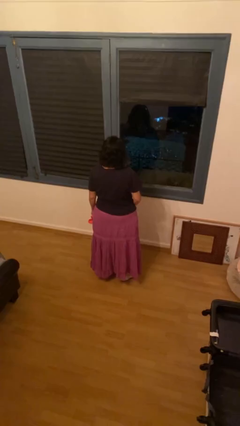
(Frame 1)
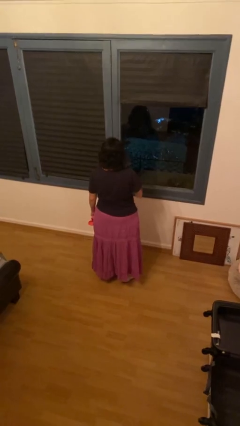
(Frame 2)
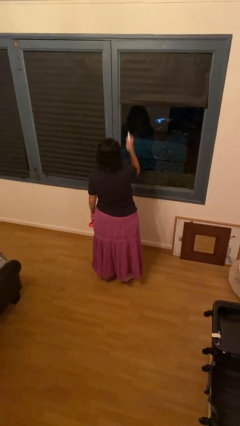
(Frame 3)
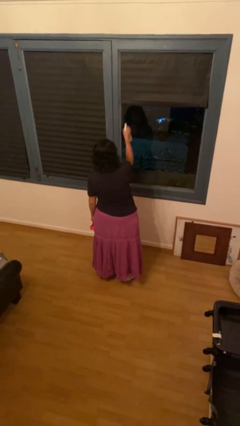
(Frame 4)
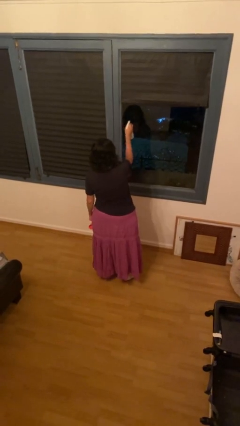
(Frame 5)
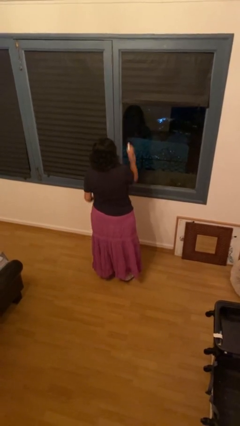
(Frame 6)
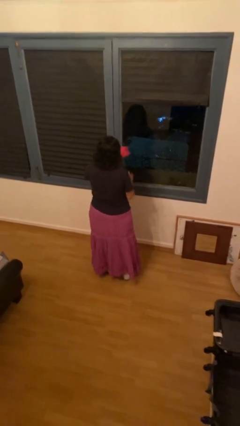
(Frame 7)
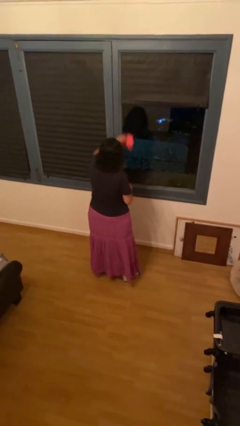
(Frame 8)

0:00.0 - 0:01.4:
person sprays from bottle

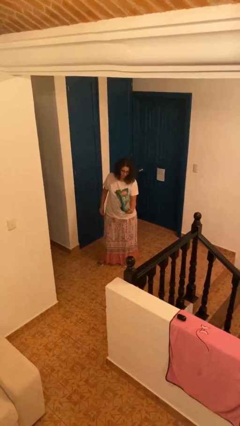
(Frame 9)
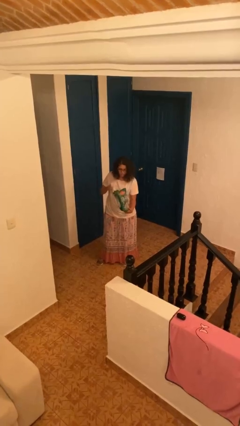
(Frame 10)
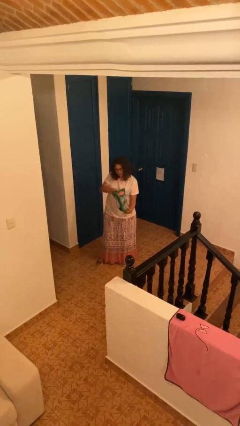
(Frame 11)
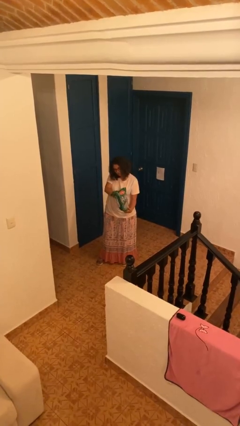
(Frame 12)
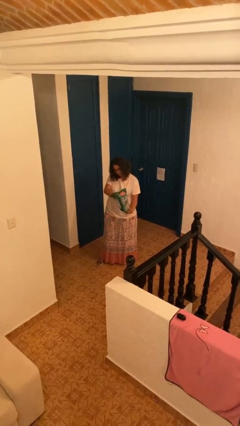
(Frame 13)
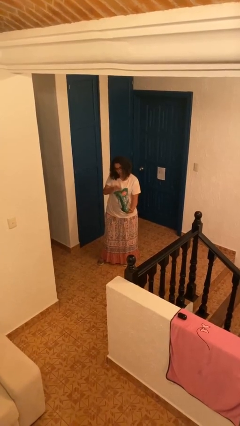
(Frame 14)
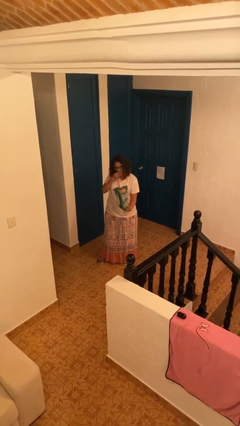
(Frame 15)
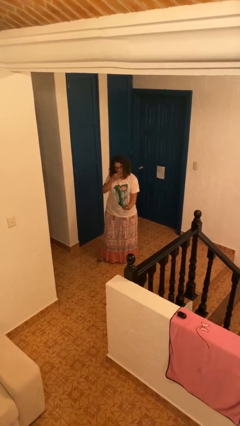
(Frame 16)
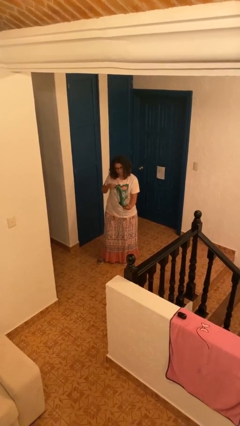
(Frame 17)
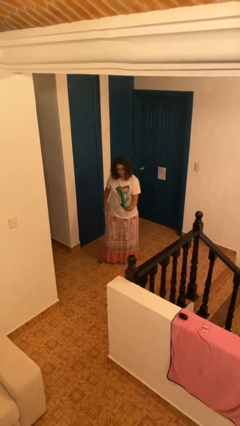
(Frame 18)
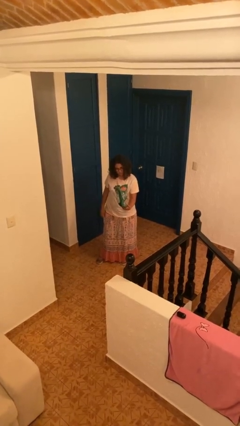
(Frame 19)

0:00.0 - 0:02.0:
person eats snack from bag

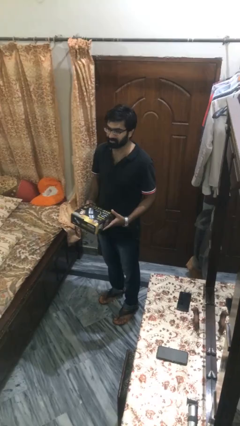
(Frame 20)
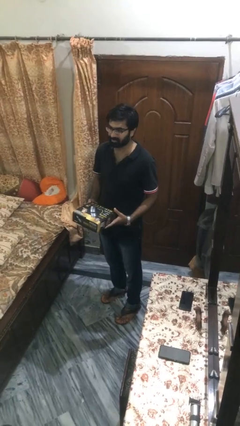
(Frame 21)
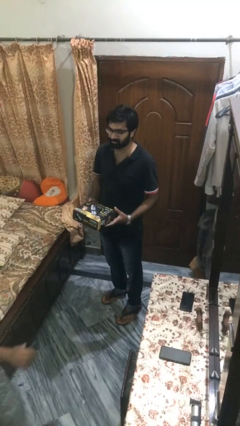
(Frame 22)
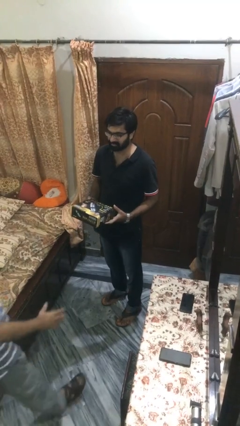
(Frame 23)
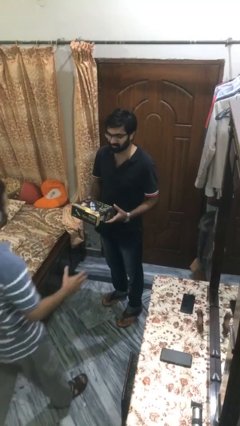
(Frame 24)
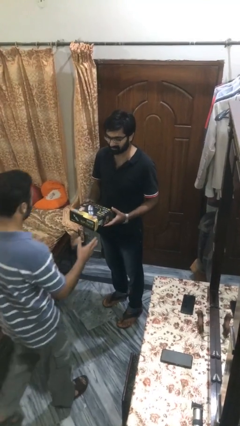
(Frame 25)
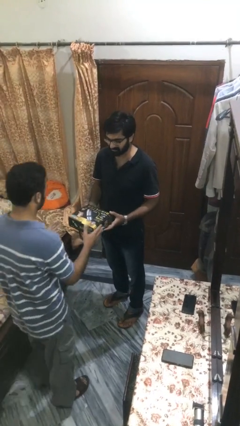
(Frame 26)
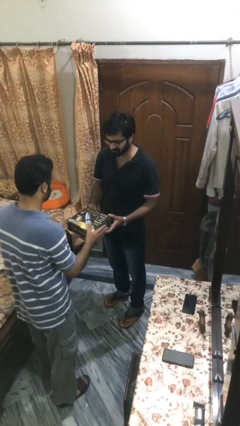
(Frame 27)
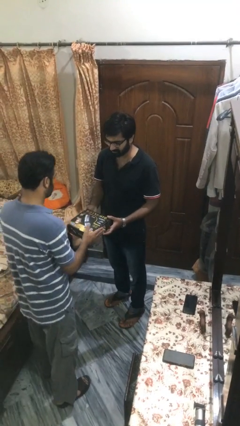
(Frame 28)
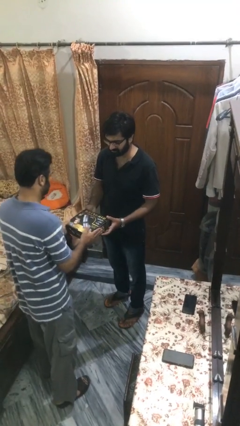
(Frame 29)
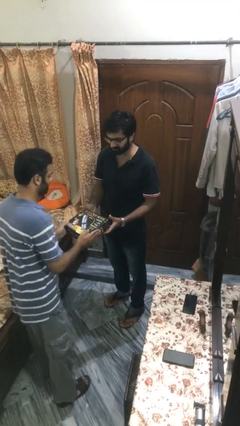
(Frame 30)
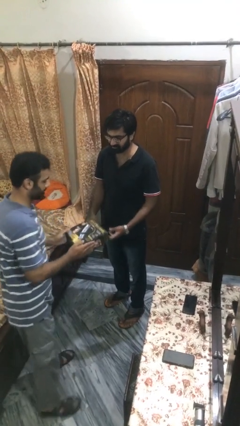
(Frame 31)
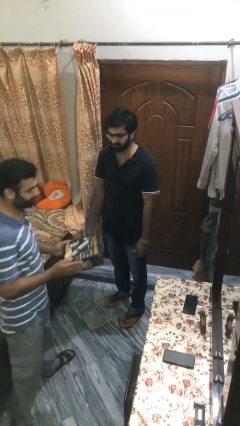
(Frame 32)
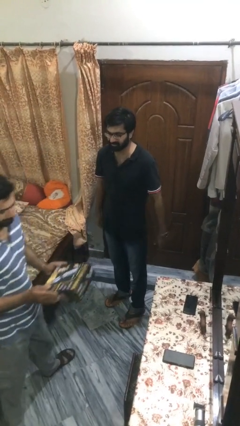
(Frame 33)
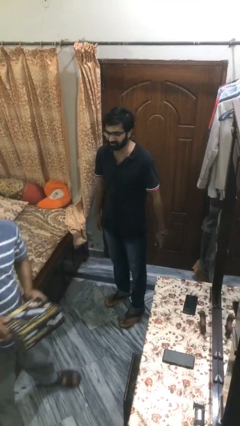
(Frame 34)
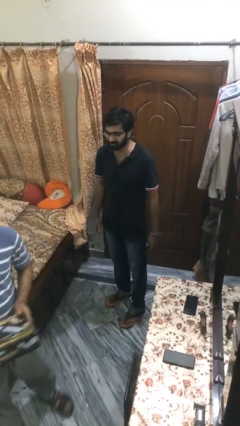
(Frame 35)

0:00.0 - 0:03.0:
person transfers object to person

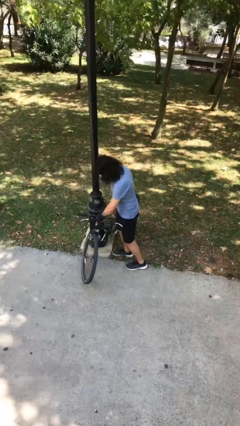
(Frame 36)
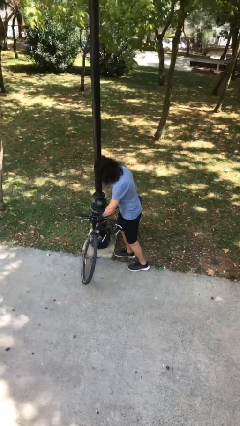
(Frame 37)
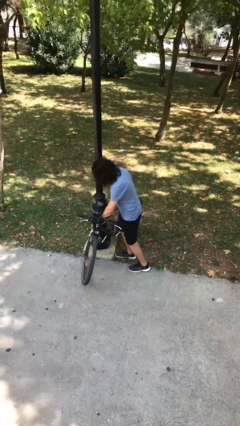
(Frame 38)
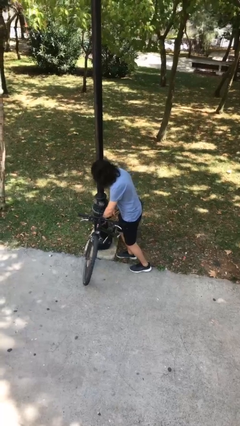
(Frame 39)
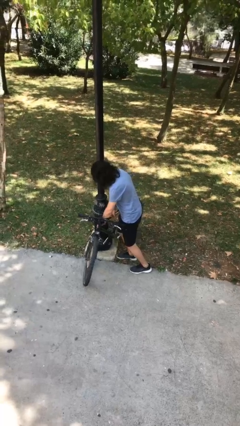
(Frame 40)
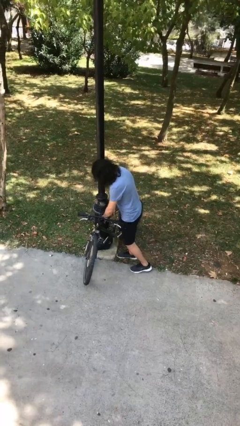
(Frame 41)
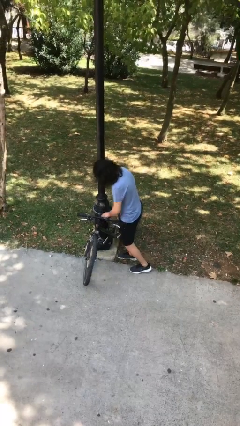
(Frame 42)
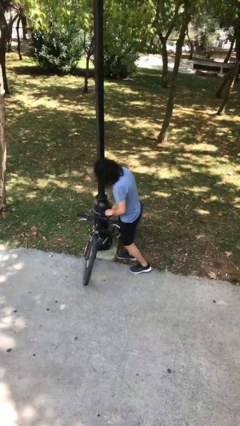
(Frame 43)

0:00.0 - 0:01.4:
person puts down object on floor

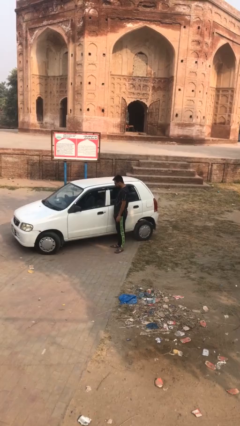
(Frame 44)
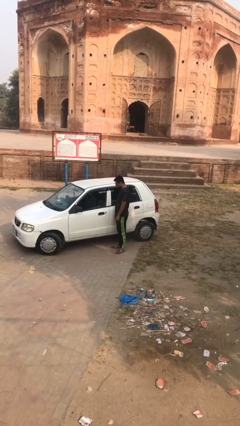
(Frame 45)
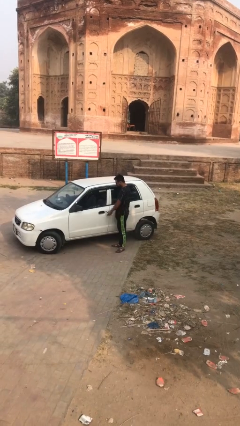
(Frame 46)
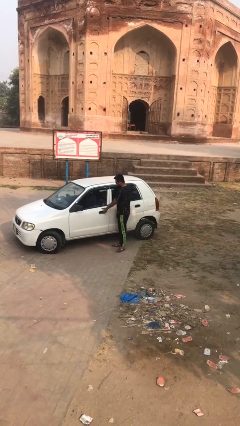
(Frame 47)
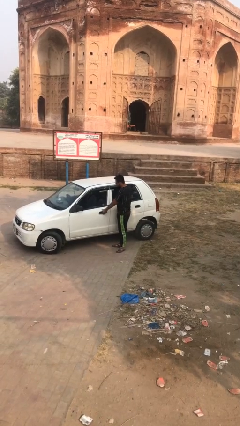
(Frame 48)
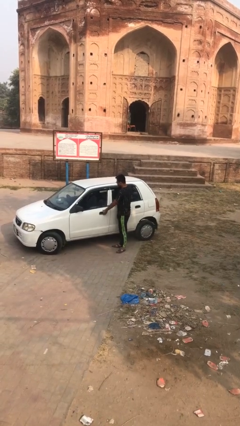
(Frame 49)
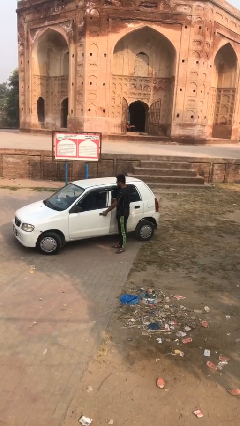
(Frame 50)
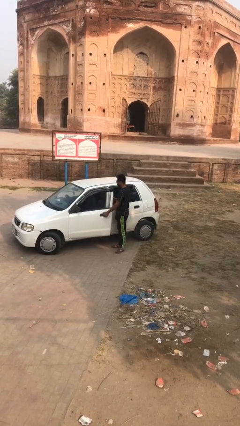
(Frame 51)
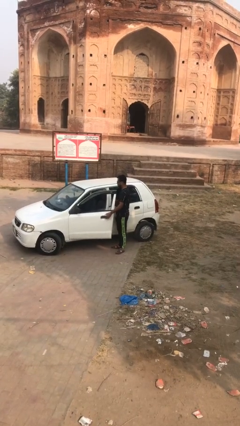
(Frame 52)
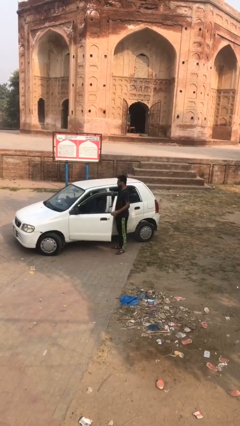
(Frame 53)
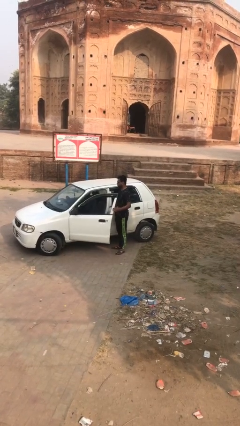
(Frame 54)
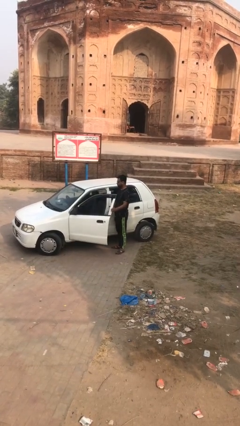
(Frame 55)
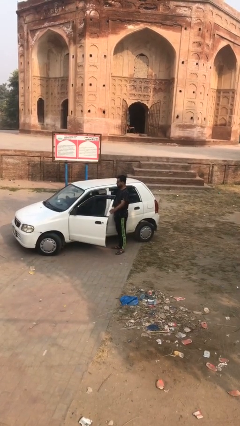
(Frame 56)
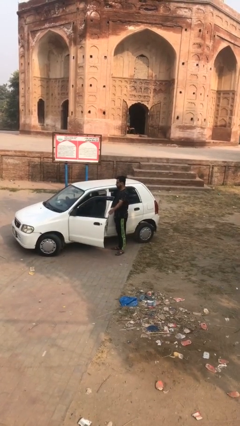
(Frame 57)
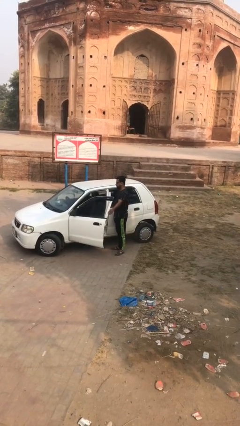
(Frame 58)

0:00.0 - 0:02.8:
person opens car door

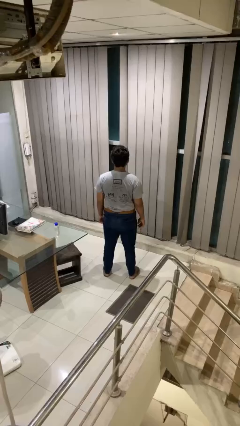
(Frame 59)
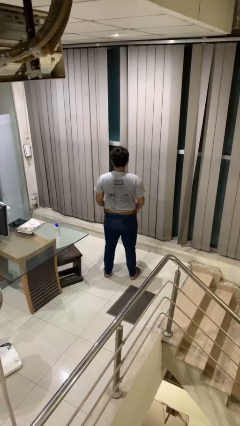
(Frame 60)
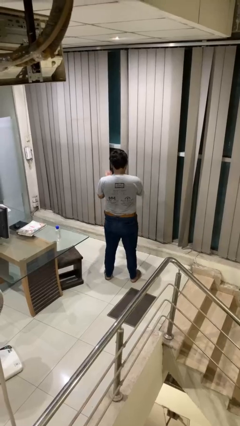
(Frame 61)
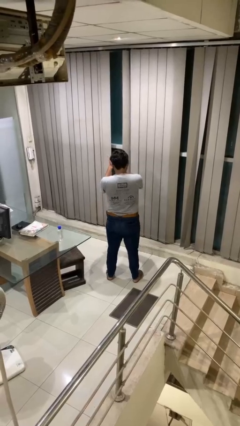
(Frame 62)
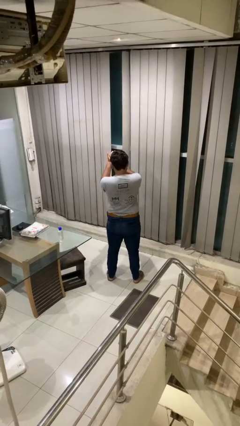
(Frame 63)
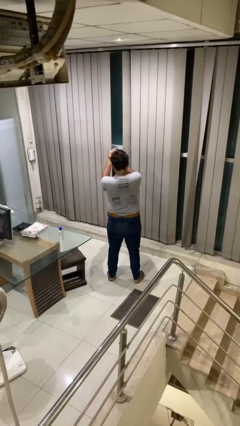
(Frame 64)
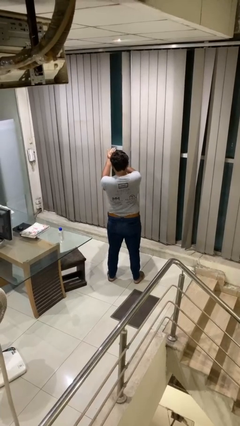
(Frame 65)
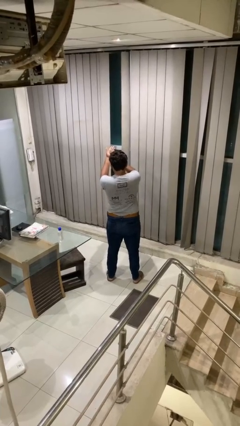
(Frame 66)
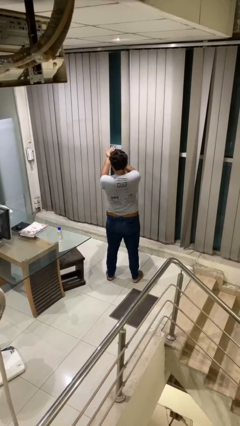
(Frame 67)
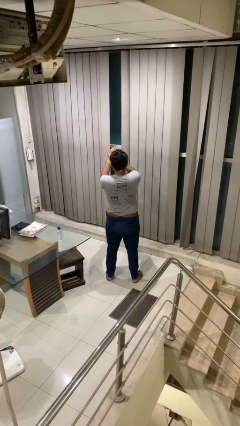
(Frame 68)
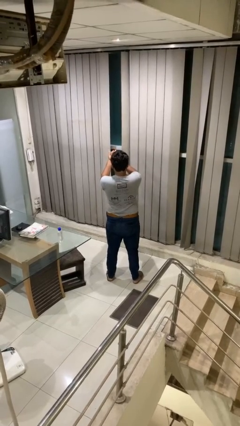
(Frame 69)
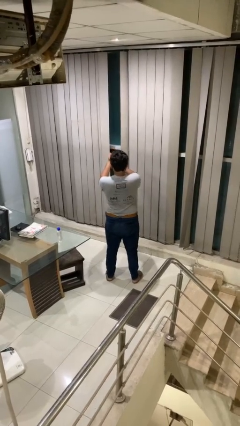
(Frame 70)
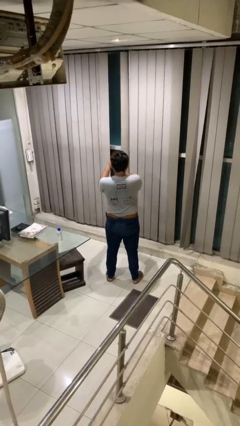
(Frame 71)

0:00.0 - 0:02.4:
person claps hands

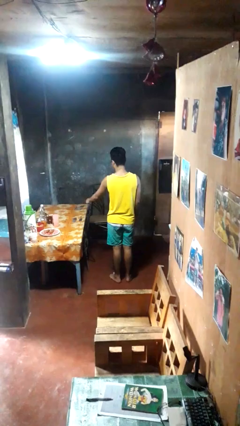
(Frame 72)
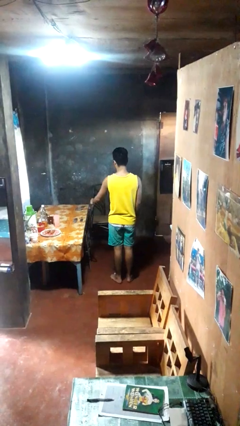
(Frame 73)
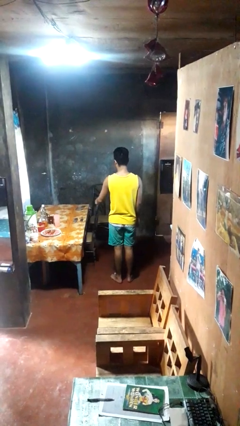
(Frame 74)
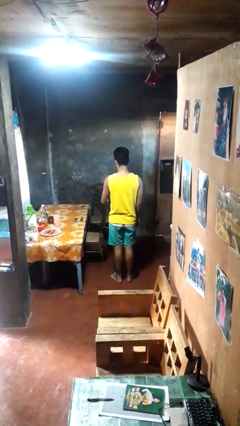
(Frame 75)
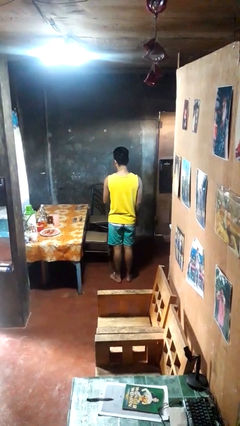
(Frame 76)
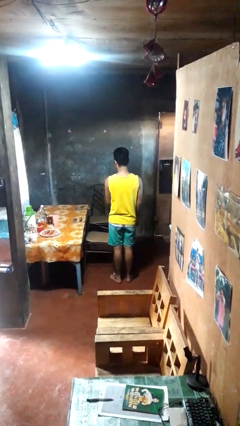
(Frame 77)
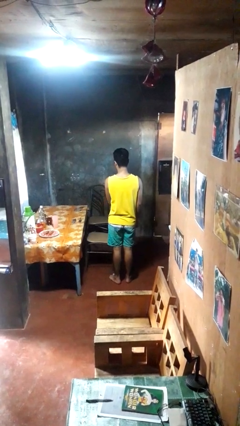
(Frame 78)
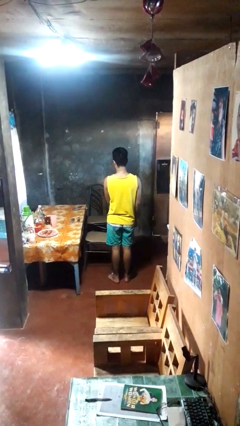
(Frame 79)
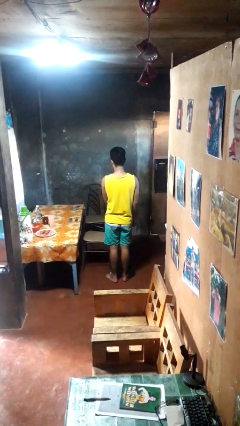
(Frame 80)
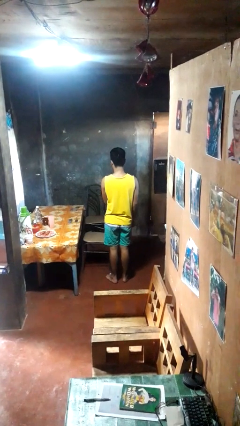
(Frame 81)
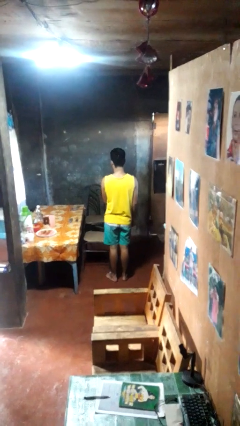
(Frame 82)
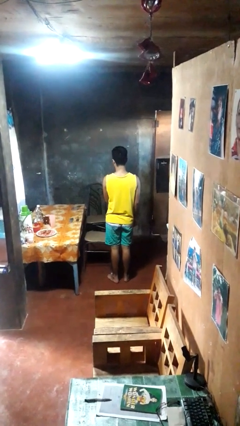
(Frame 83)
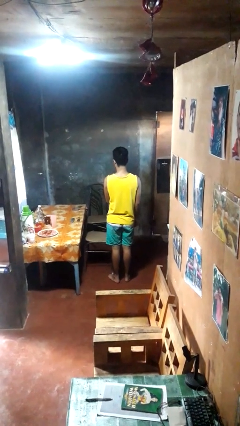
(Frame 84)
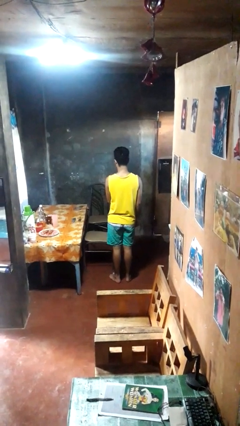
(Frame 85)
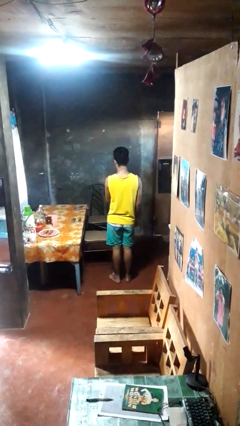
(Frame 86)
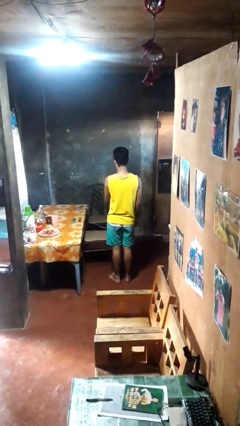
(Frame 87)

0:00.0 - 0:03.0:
person pulls out chair

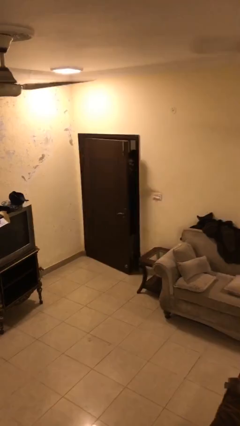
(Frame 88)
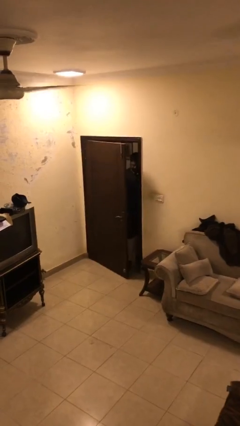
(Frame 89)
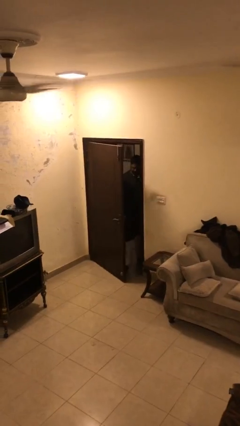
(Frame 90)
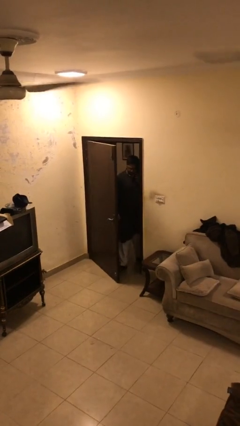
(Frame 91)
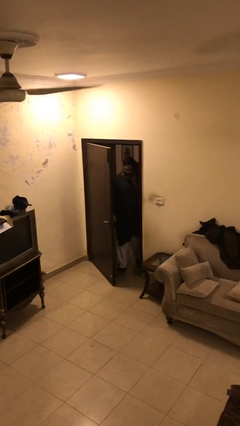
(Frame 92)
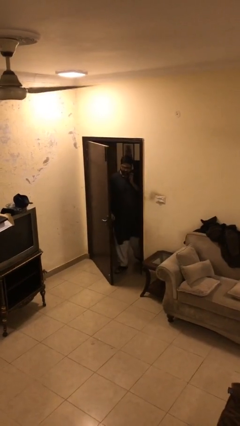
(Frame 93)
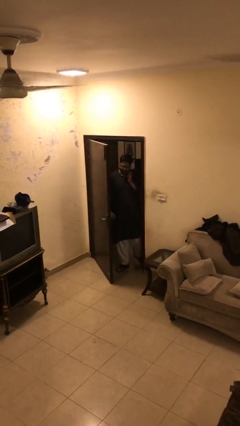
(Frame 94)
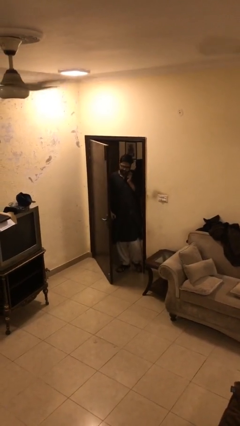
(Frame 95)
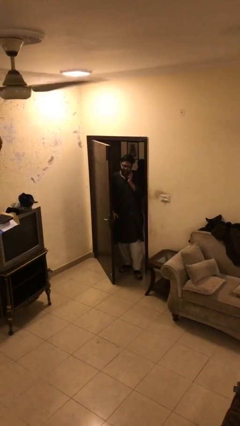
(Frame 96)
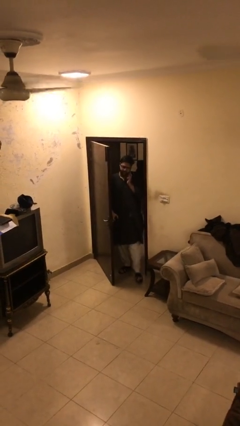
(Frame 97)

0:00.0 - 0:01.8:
person opens facility door
